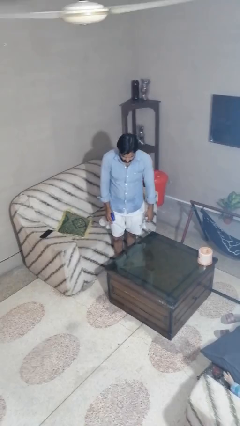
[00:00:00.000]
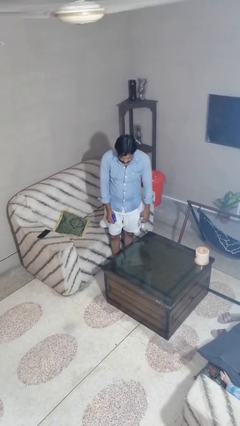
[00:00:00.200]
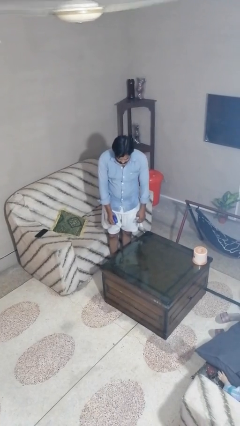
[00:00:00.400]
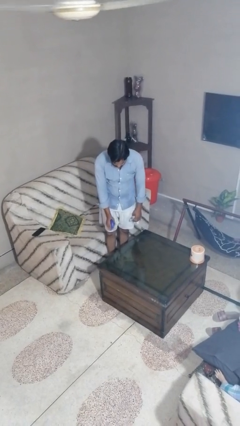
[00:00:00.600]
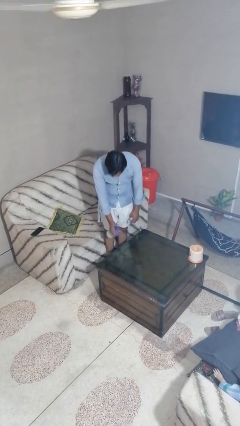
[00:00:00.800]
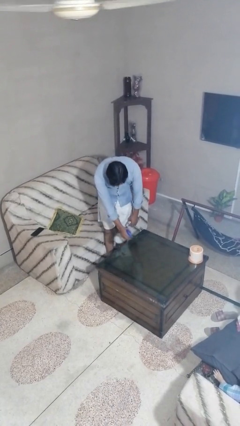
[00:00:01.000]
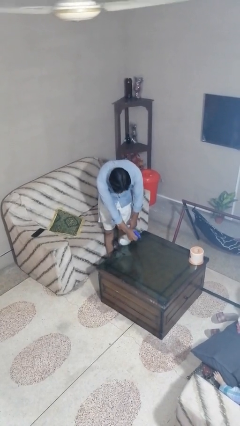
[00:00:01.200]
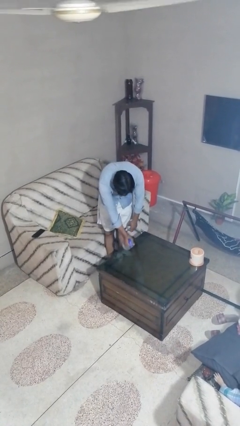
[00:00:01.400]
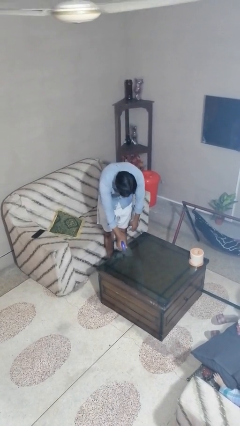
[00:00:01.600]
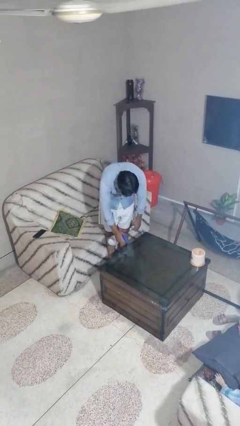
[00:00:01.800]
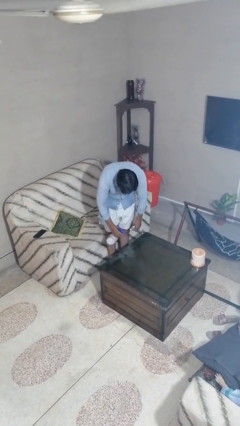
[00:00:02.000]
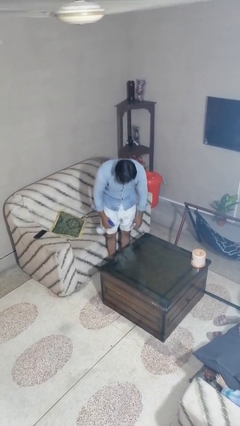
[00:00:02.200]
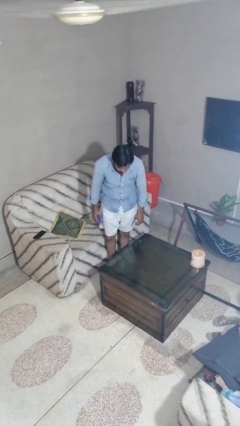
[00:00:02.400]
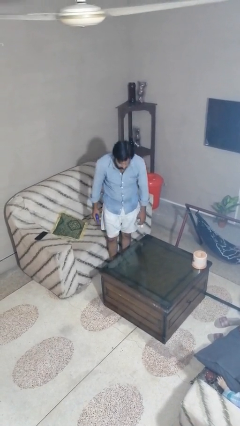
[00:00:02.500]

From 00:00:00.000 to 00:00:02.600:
person sprays from bottle

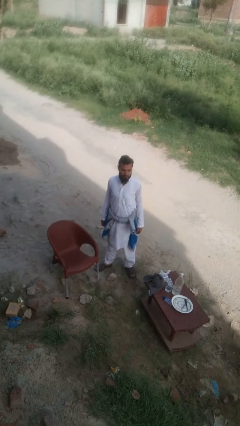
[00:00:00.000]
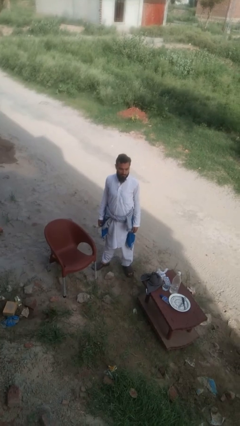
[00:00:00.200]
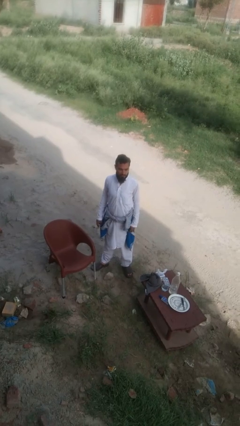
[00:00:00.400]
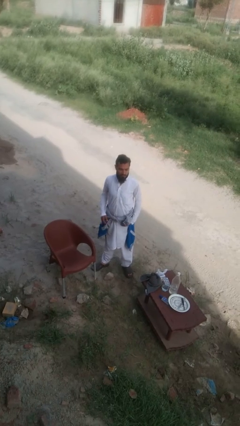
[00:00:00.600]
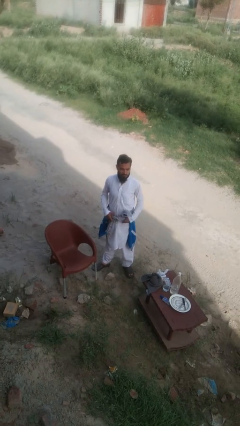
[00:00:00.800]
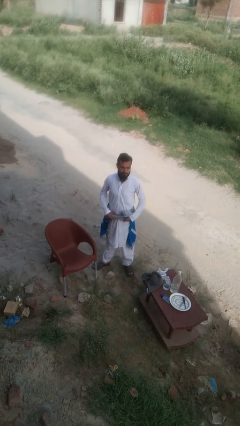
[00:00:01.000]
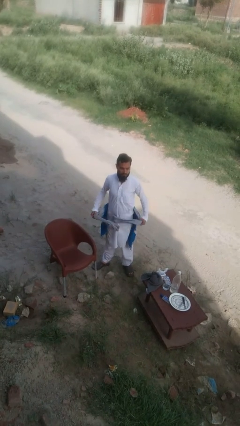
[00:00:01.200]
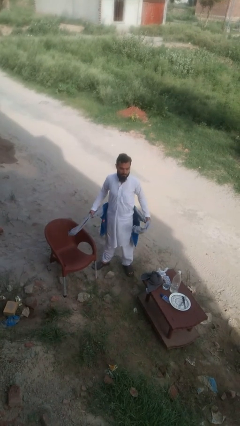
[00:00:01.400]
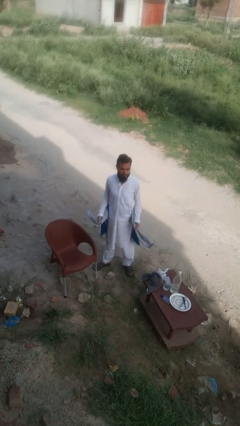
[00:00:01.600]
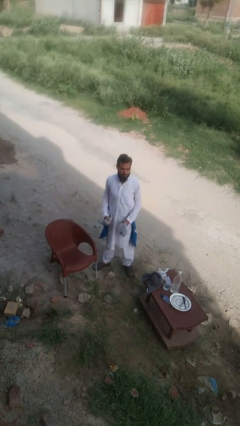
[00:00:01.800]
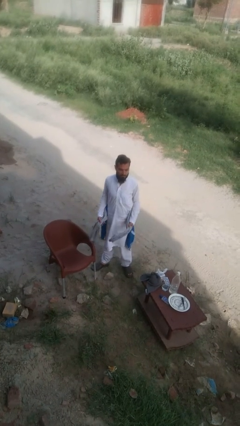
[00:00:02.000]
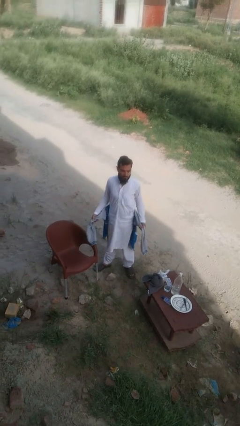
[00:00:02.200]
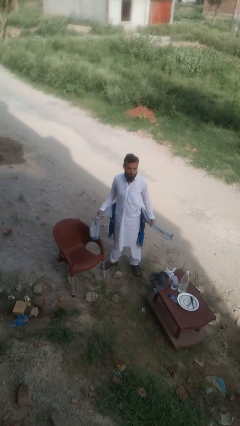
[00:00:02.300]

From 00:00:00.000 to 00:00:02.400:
person unties jacket around waist

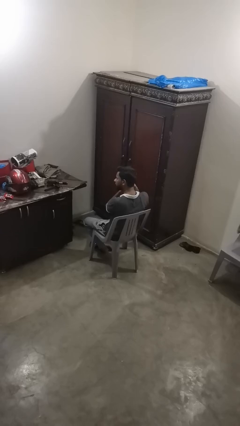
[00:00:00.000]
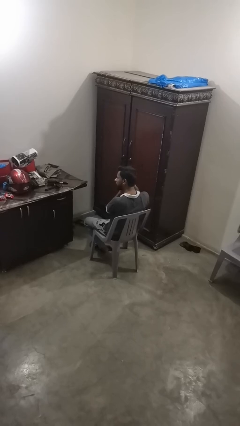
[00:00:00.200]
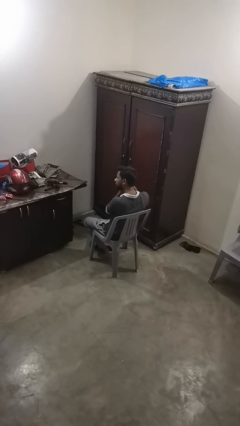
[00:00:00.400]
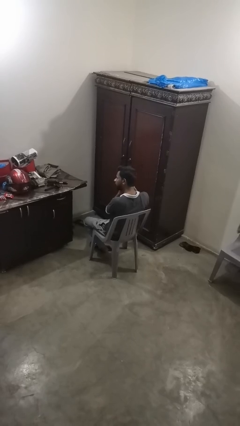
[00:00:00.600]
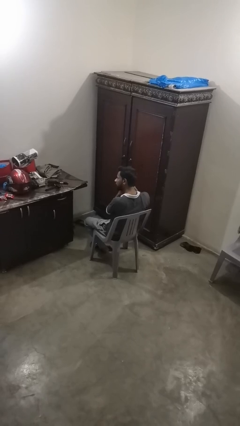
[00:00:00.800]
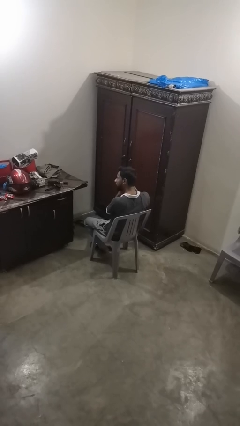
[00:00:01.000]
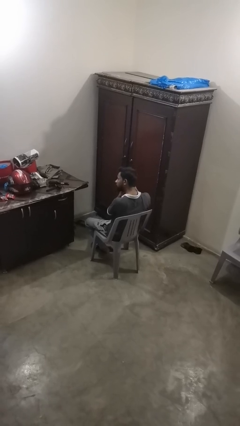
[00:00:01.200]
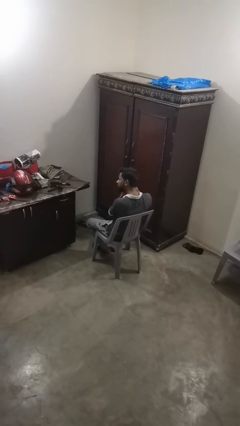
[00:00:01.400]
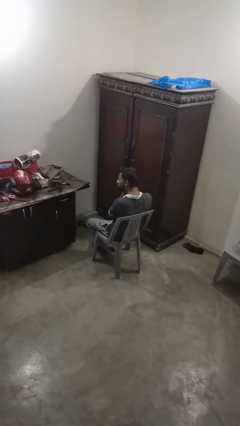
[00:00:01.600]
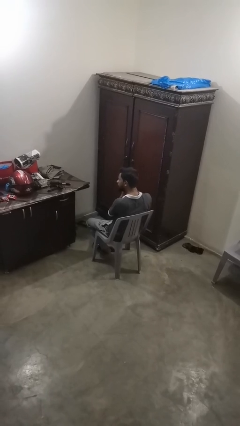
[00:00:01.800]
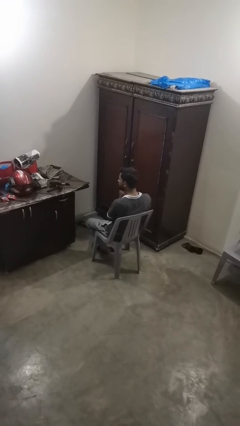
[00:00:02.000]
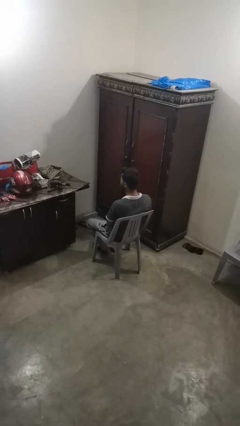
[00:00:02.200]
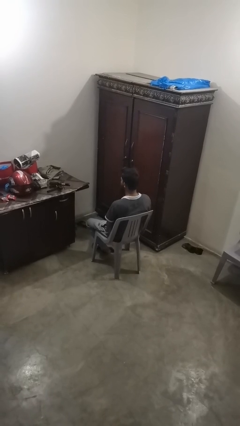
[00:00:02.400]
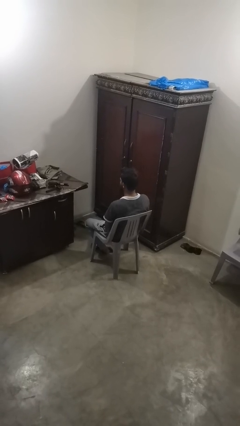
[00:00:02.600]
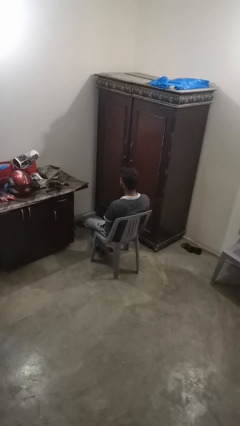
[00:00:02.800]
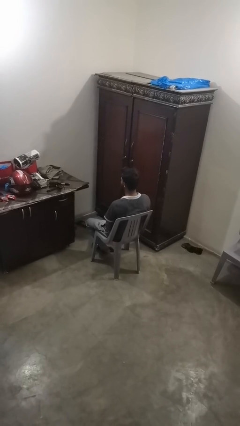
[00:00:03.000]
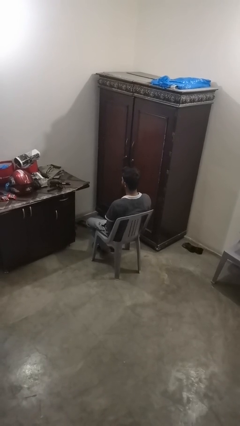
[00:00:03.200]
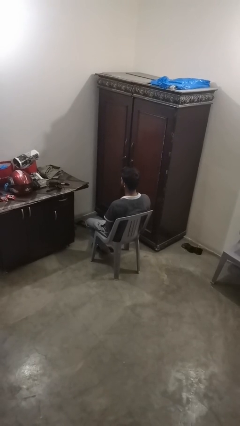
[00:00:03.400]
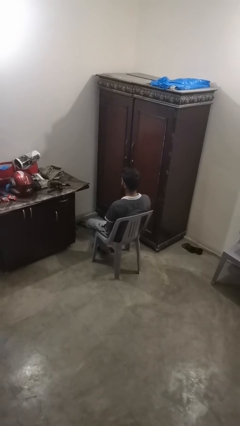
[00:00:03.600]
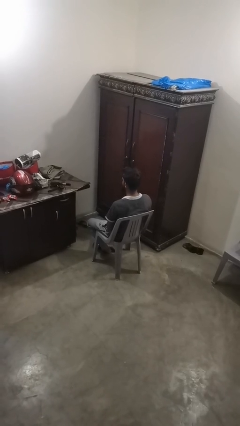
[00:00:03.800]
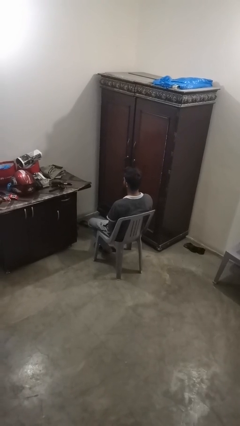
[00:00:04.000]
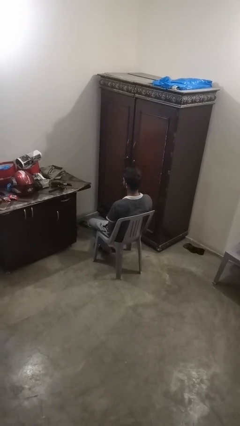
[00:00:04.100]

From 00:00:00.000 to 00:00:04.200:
person puts on earrings

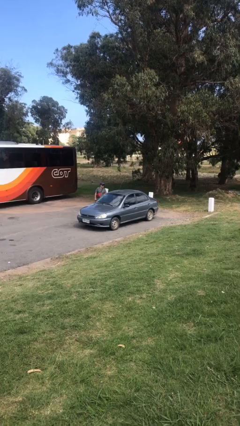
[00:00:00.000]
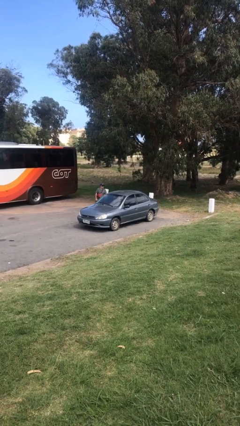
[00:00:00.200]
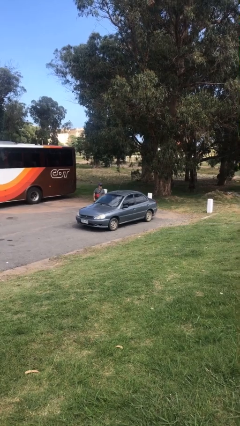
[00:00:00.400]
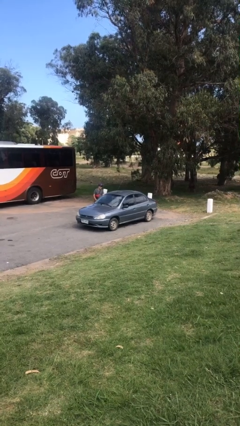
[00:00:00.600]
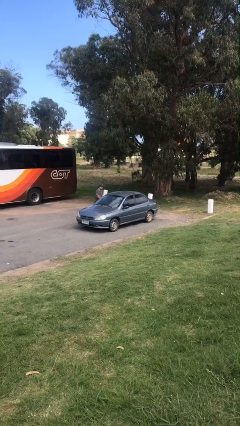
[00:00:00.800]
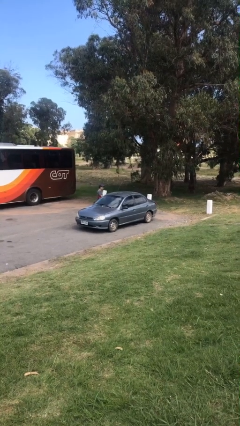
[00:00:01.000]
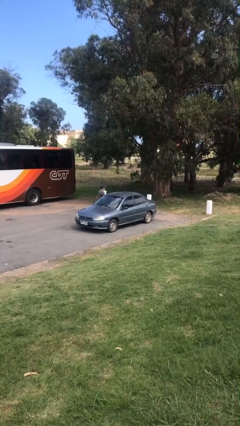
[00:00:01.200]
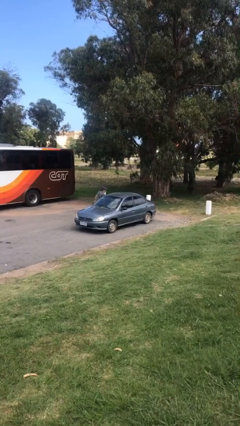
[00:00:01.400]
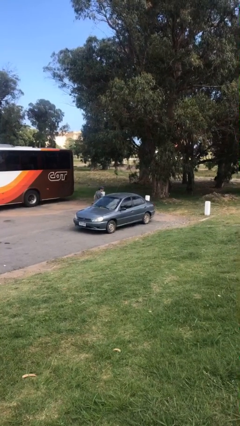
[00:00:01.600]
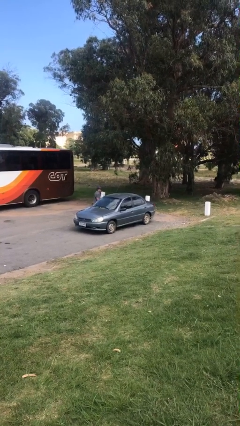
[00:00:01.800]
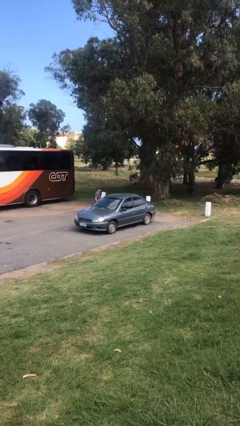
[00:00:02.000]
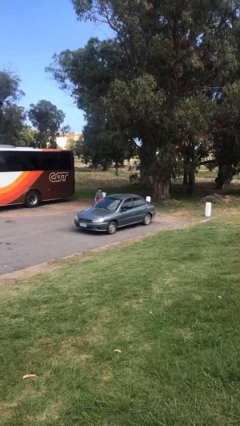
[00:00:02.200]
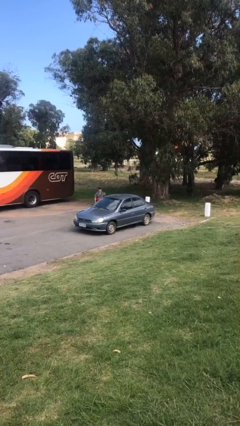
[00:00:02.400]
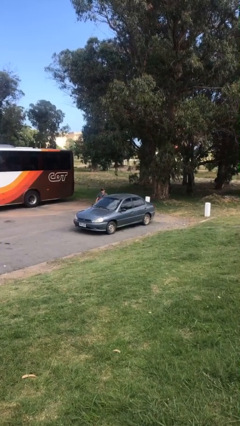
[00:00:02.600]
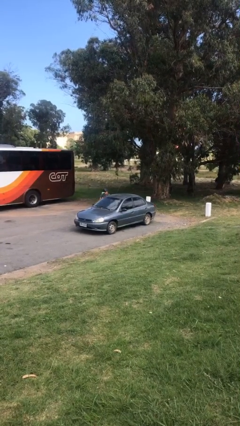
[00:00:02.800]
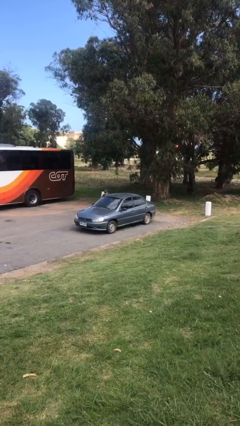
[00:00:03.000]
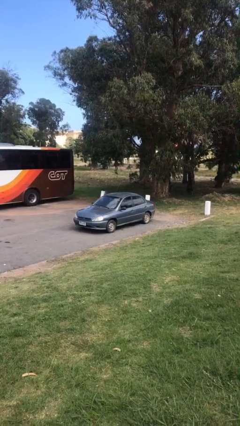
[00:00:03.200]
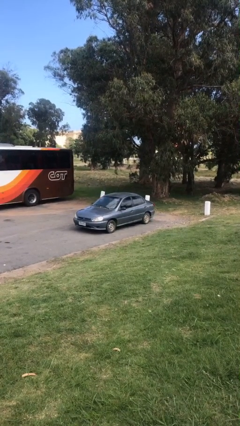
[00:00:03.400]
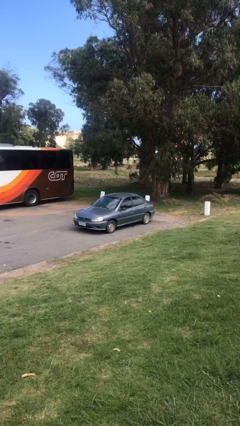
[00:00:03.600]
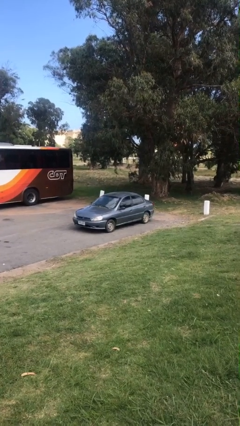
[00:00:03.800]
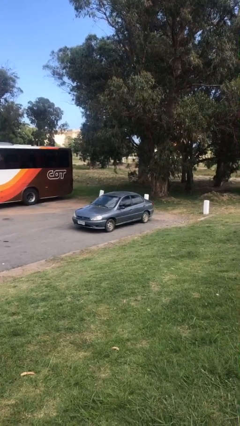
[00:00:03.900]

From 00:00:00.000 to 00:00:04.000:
car picks up person

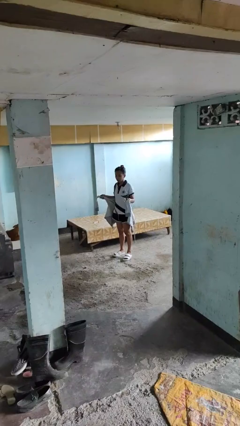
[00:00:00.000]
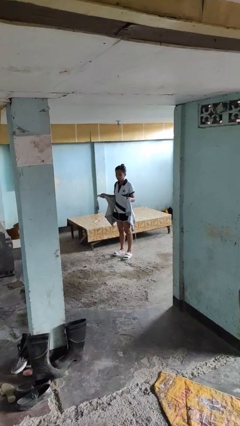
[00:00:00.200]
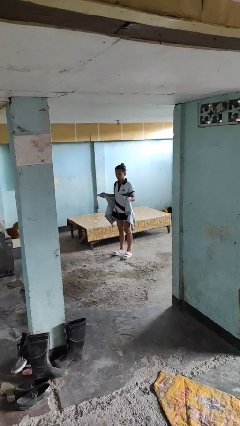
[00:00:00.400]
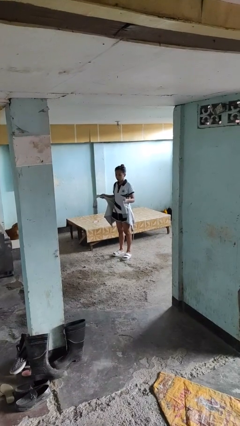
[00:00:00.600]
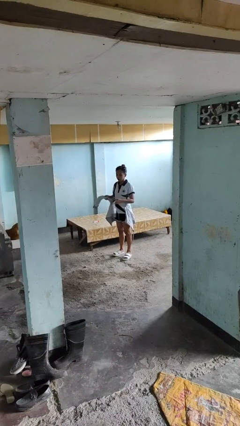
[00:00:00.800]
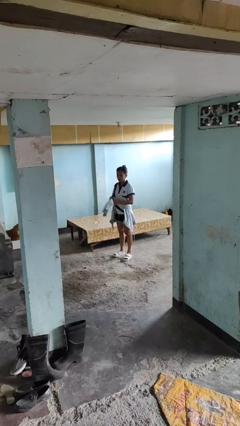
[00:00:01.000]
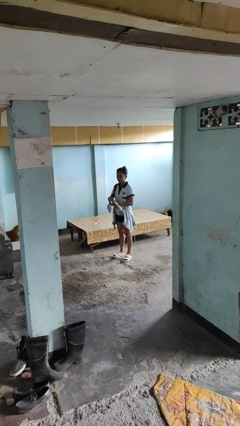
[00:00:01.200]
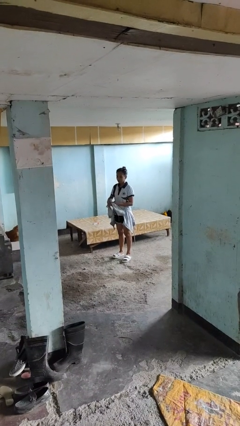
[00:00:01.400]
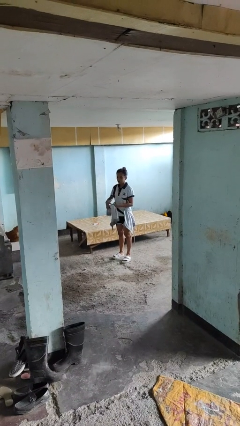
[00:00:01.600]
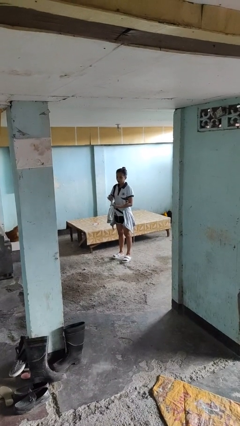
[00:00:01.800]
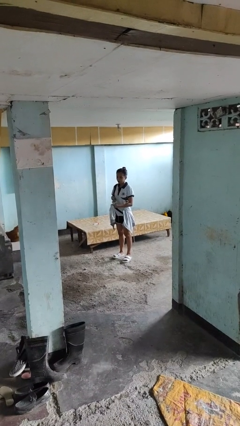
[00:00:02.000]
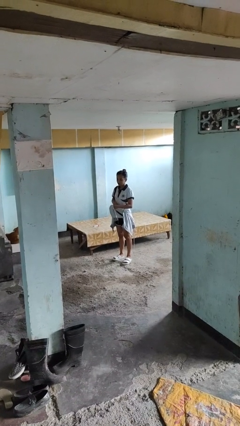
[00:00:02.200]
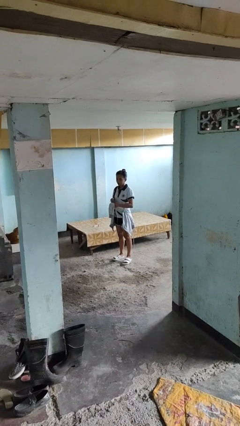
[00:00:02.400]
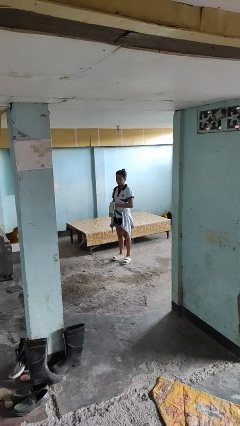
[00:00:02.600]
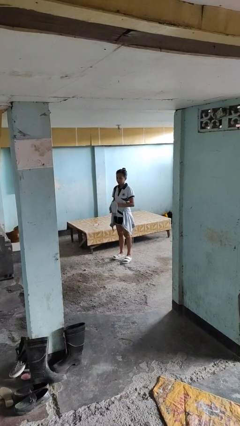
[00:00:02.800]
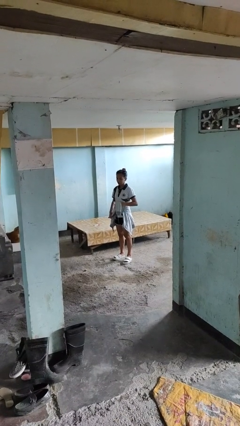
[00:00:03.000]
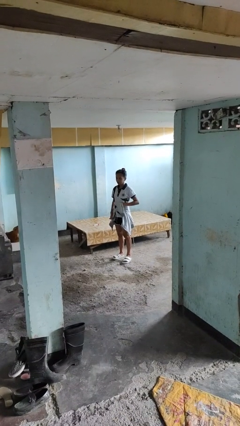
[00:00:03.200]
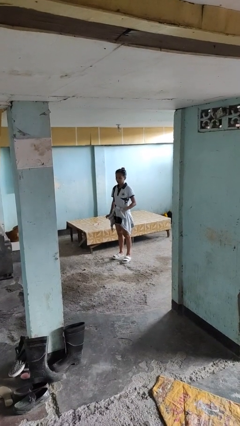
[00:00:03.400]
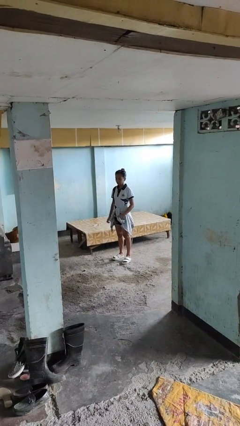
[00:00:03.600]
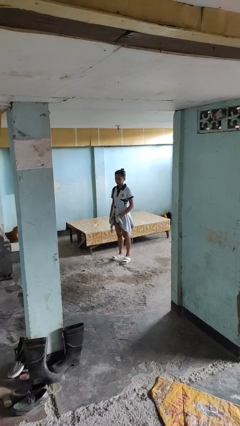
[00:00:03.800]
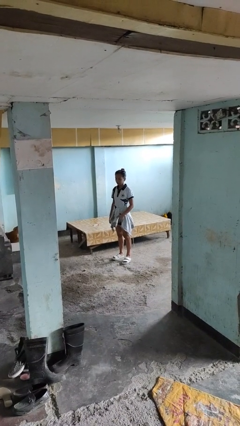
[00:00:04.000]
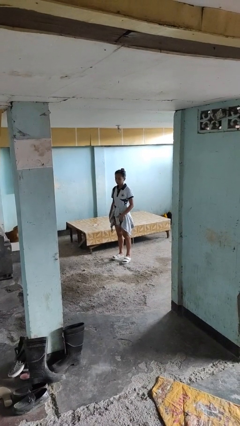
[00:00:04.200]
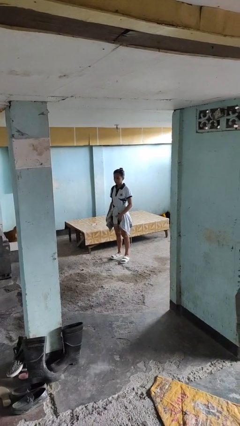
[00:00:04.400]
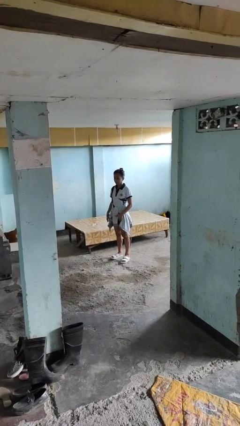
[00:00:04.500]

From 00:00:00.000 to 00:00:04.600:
person ties jacket around waist
